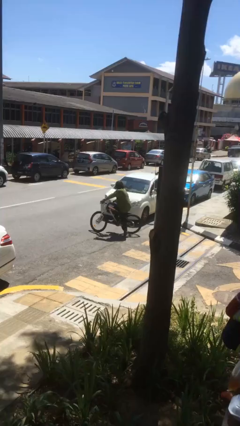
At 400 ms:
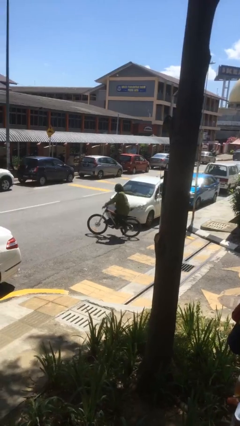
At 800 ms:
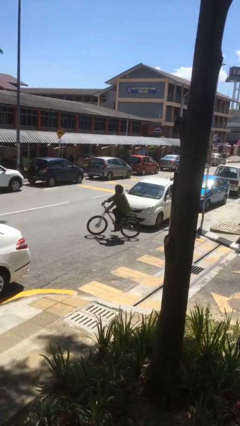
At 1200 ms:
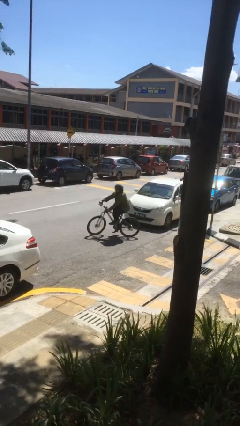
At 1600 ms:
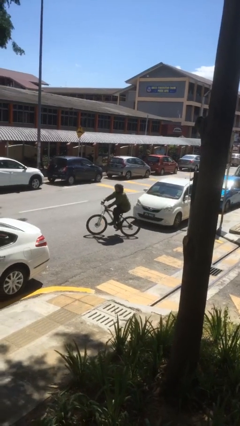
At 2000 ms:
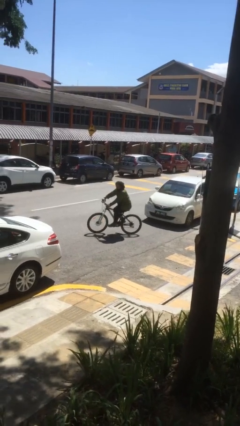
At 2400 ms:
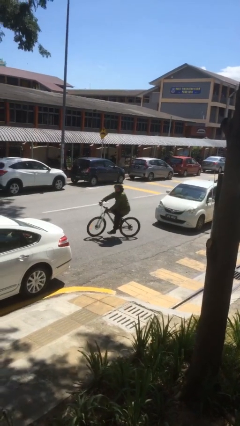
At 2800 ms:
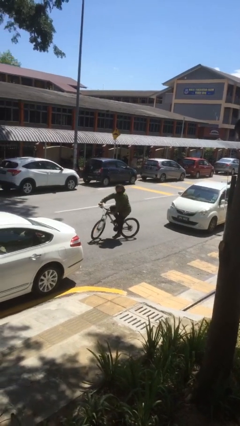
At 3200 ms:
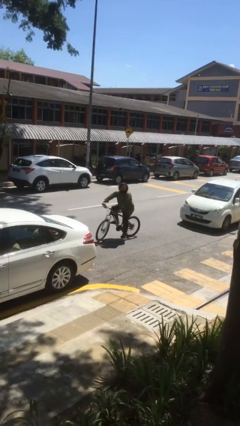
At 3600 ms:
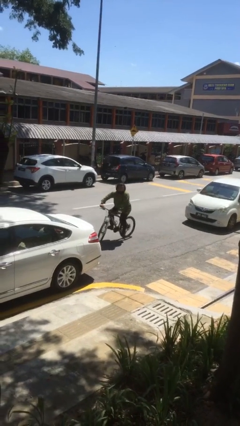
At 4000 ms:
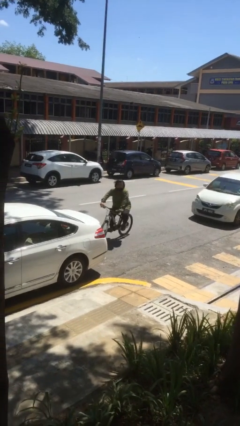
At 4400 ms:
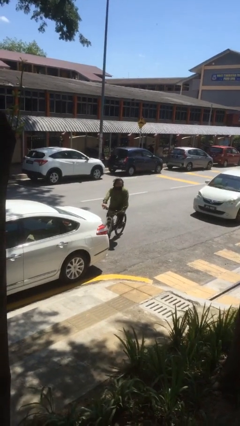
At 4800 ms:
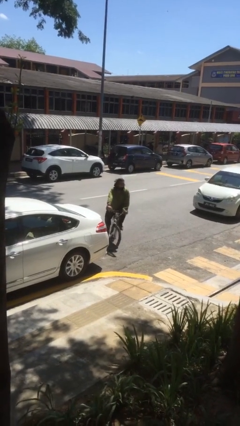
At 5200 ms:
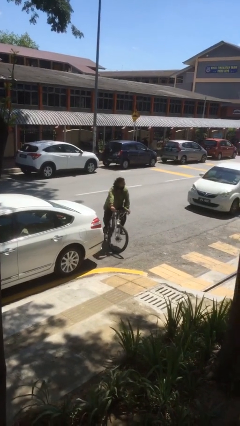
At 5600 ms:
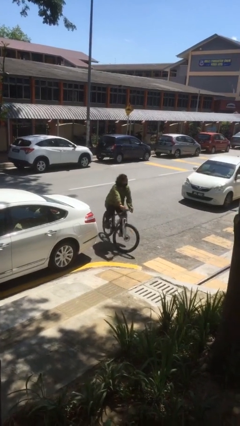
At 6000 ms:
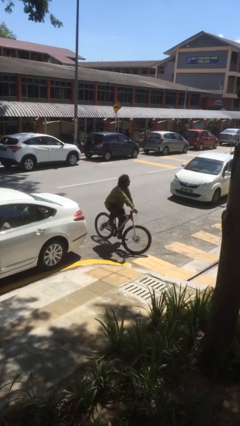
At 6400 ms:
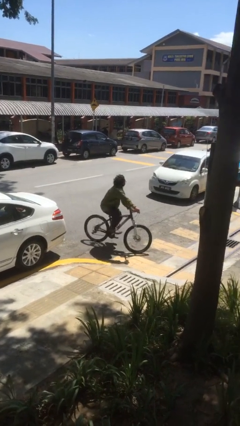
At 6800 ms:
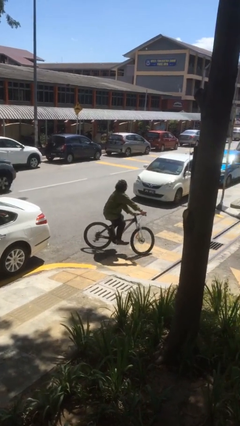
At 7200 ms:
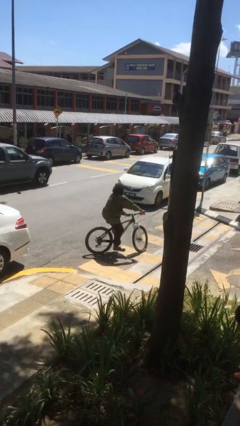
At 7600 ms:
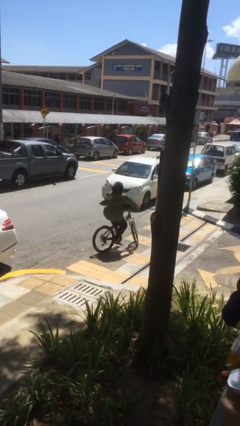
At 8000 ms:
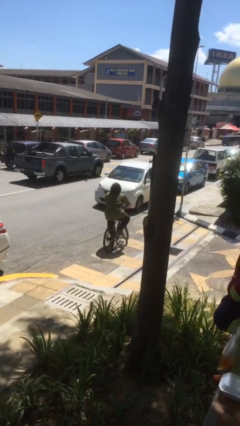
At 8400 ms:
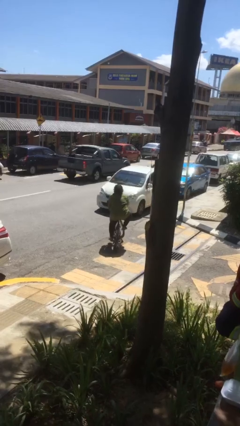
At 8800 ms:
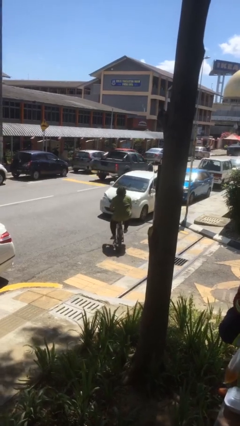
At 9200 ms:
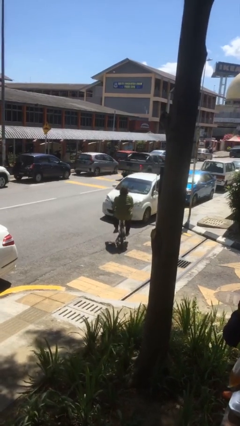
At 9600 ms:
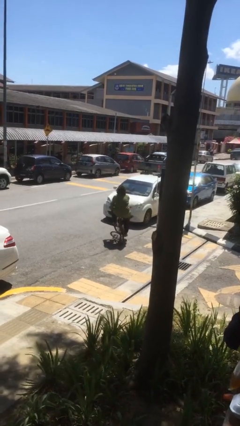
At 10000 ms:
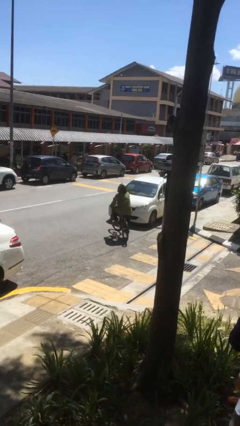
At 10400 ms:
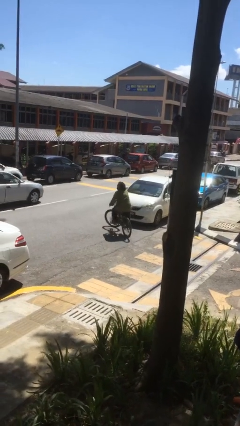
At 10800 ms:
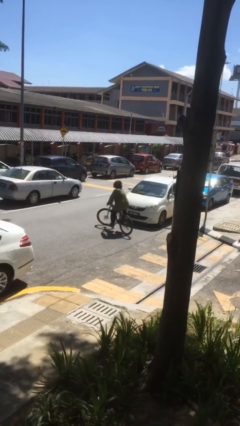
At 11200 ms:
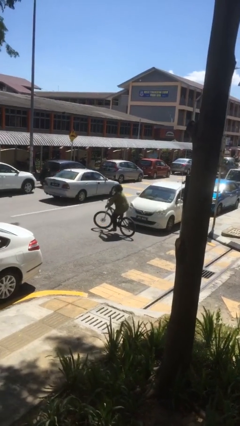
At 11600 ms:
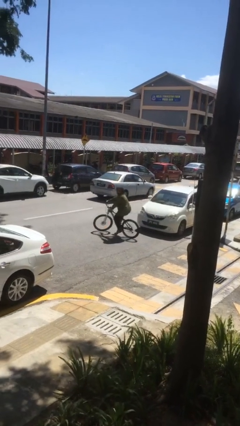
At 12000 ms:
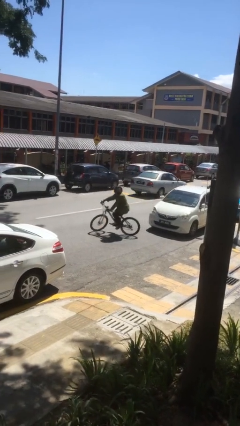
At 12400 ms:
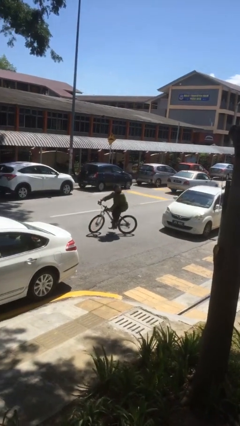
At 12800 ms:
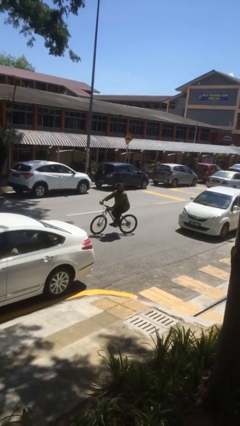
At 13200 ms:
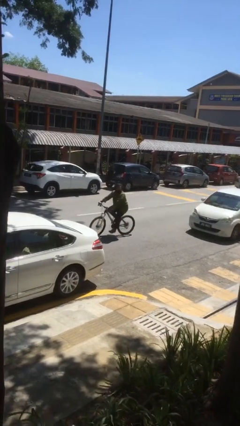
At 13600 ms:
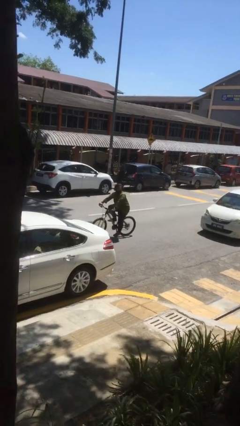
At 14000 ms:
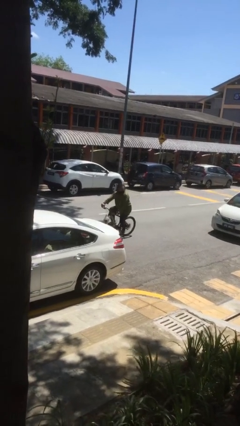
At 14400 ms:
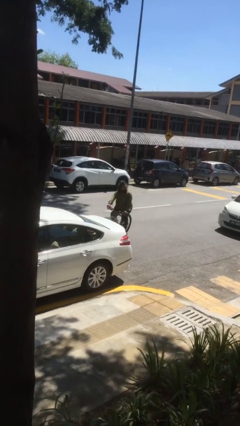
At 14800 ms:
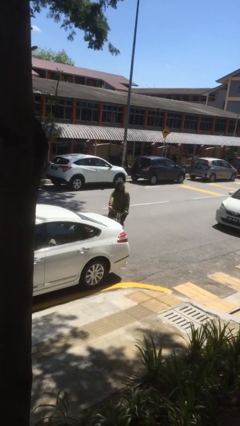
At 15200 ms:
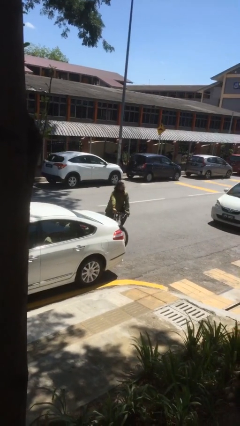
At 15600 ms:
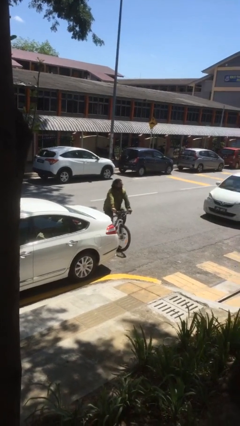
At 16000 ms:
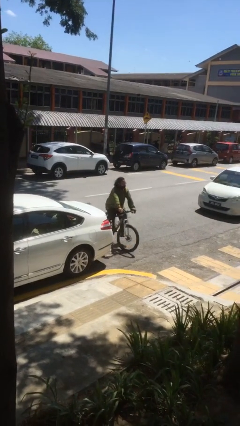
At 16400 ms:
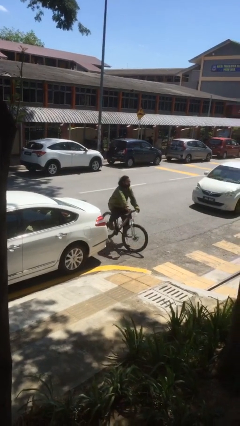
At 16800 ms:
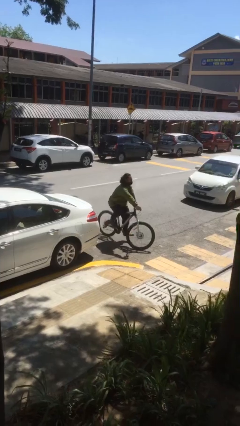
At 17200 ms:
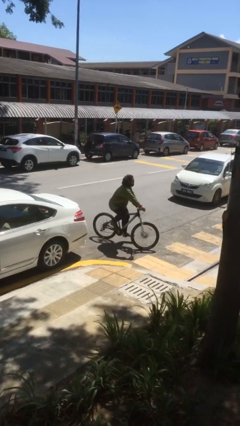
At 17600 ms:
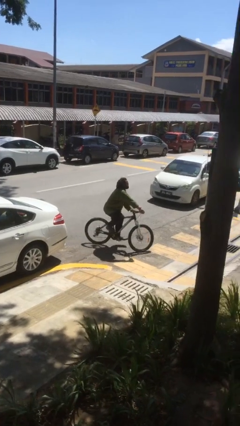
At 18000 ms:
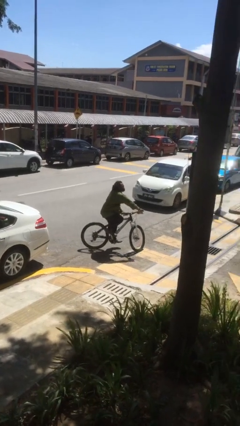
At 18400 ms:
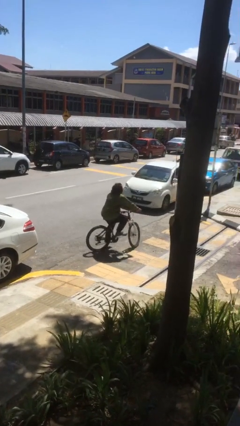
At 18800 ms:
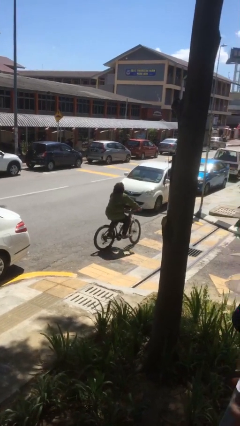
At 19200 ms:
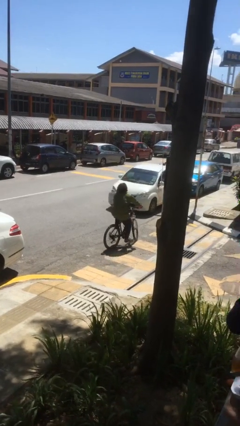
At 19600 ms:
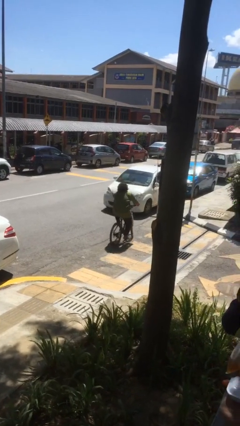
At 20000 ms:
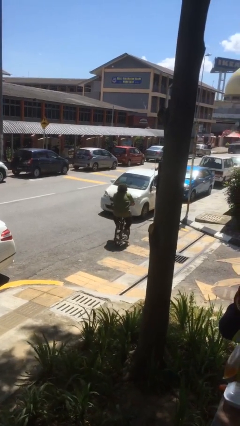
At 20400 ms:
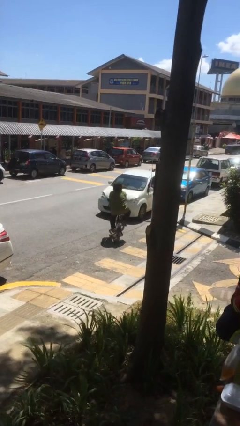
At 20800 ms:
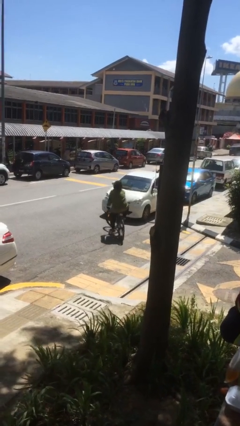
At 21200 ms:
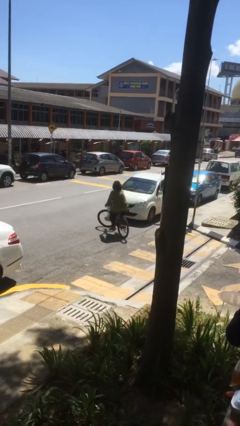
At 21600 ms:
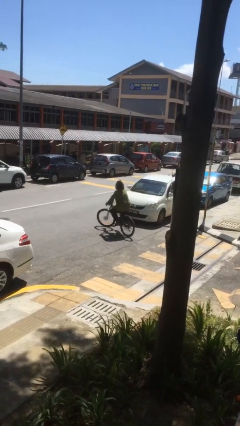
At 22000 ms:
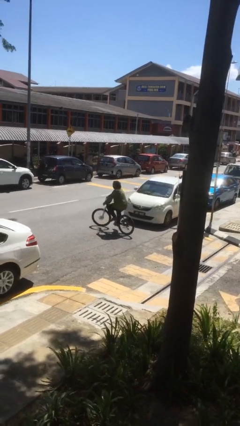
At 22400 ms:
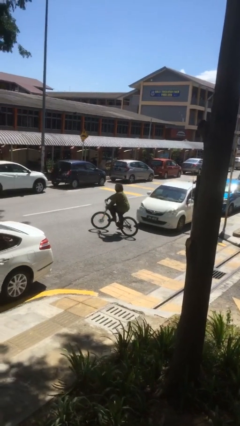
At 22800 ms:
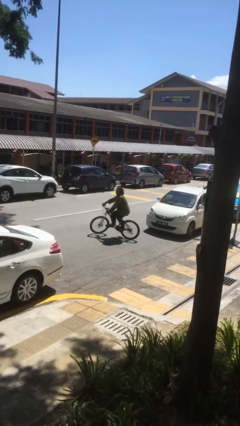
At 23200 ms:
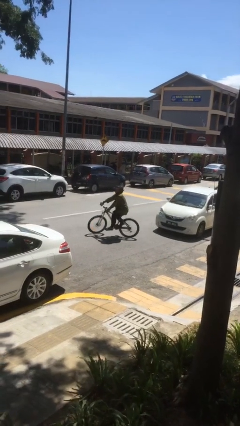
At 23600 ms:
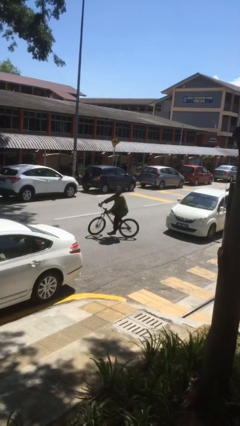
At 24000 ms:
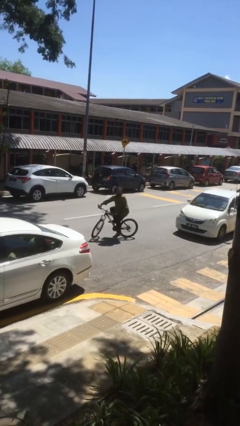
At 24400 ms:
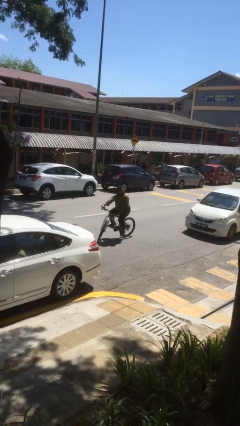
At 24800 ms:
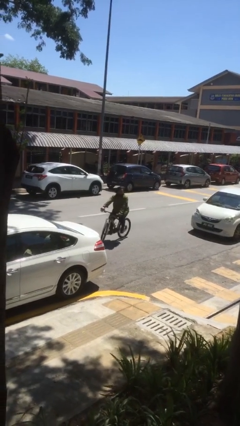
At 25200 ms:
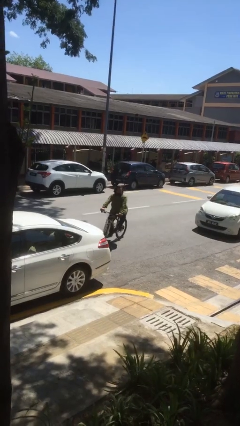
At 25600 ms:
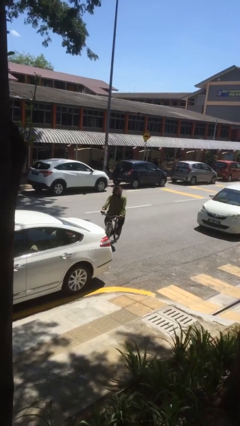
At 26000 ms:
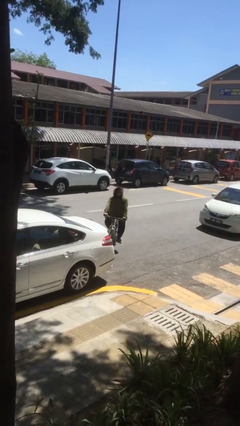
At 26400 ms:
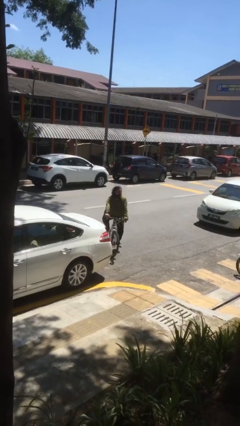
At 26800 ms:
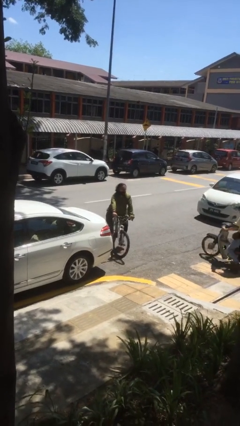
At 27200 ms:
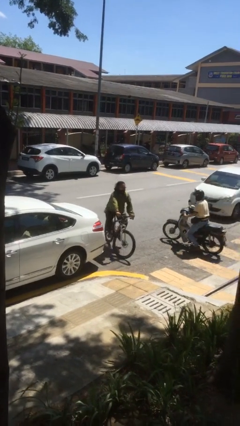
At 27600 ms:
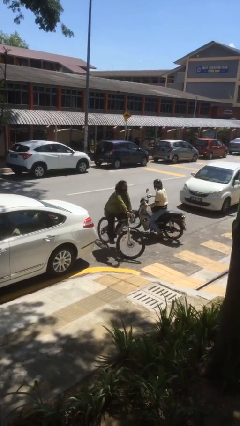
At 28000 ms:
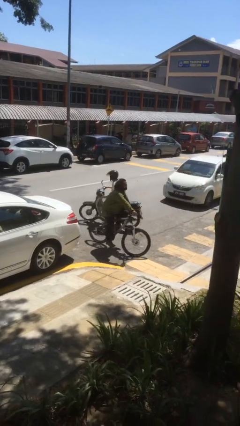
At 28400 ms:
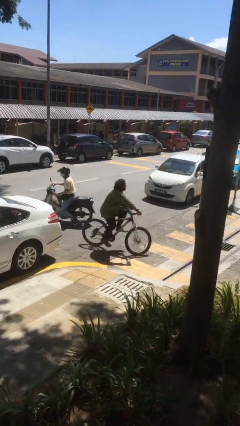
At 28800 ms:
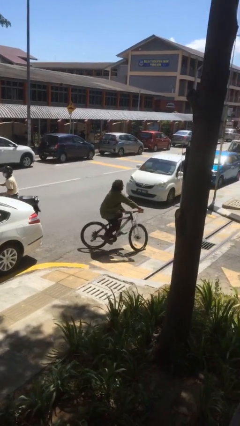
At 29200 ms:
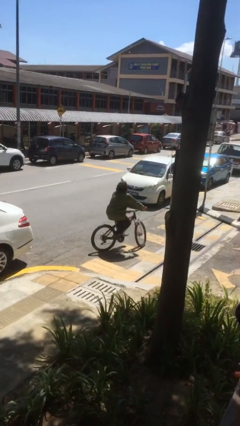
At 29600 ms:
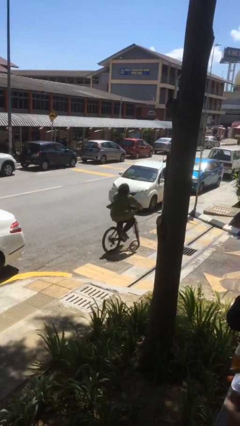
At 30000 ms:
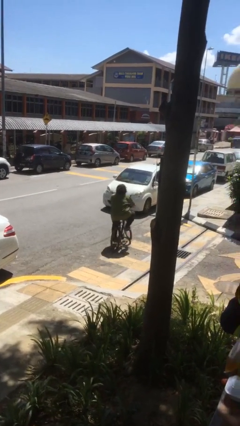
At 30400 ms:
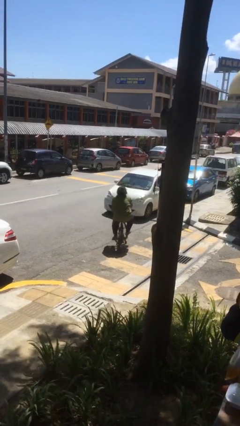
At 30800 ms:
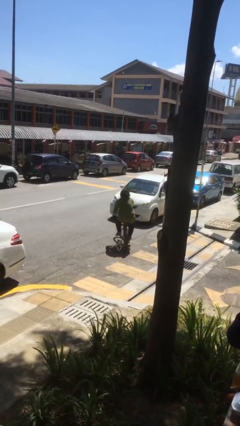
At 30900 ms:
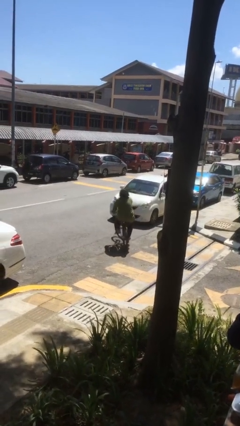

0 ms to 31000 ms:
person rides bicycle

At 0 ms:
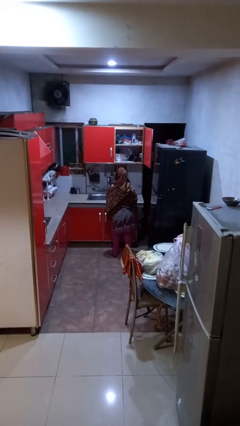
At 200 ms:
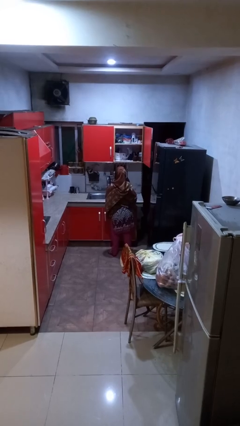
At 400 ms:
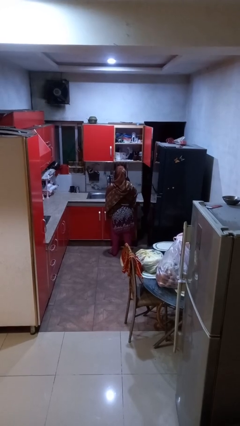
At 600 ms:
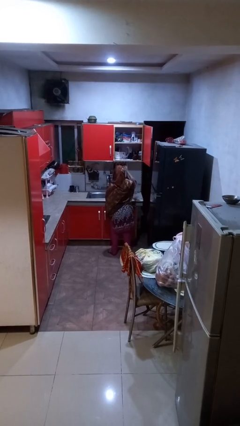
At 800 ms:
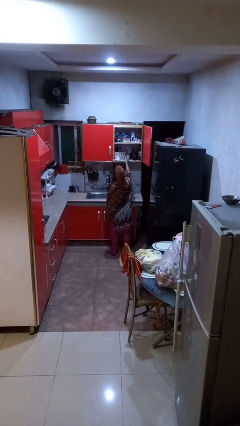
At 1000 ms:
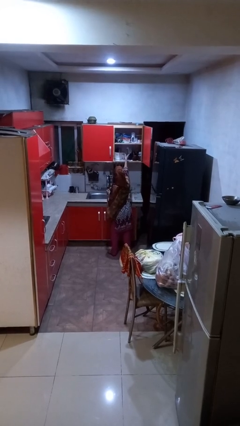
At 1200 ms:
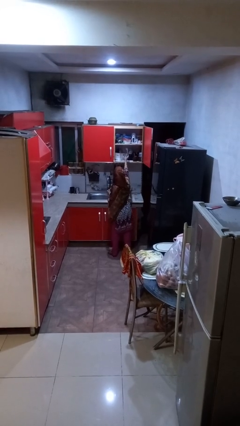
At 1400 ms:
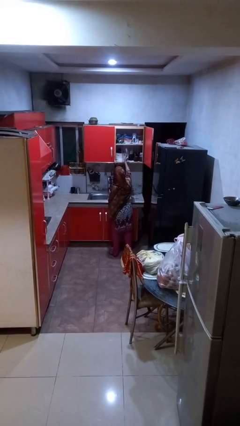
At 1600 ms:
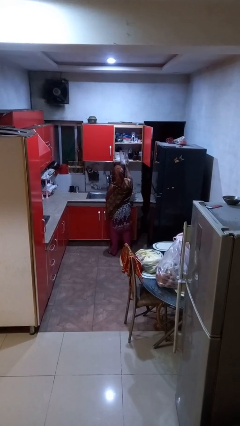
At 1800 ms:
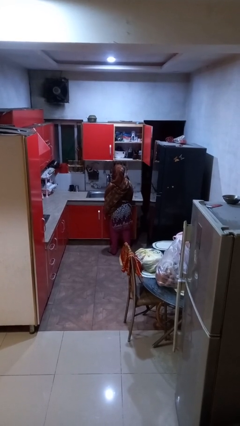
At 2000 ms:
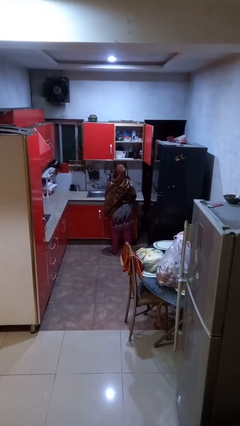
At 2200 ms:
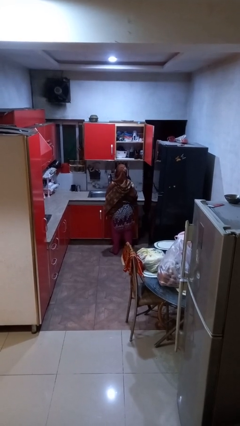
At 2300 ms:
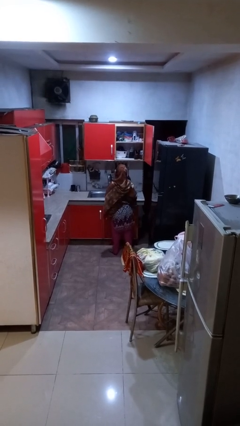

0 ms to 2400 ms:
person takes object from cabinet

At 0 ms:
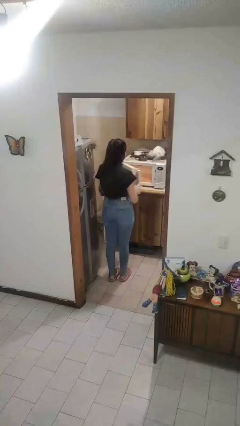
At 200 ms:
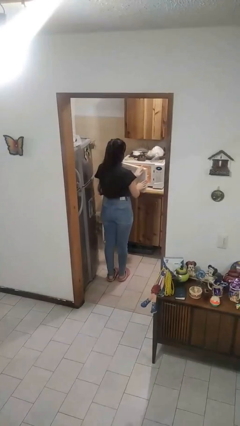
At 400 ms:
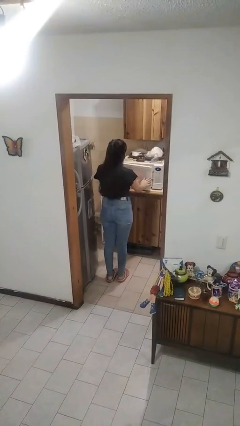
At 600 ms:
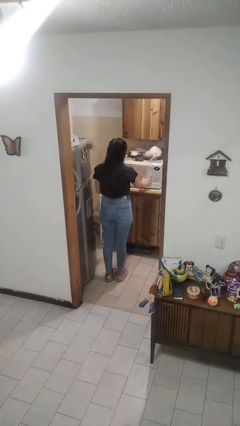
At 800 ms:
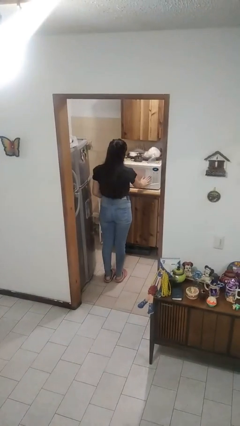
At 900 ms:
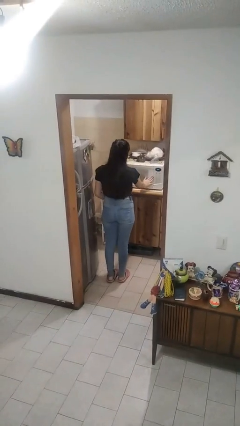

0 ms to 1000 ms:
person closes microwave
